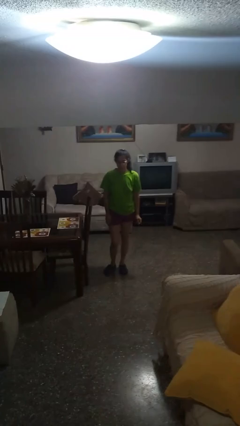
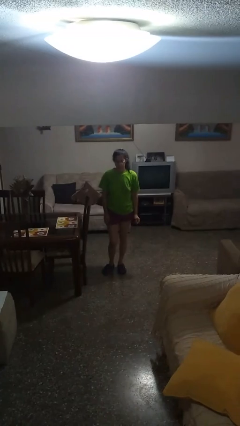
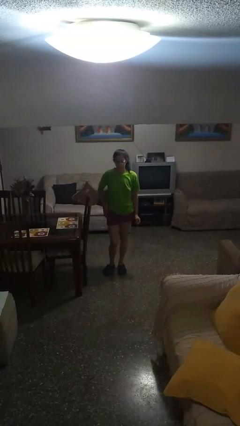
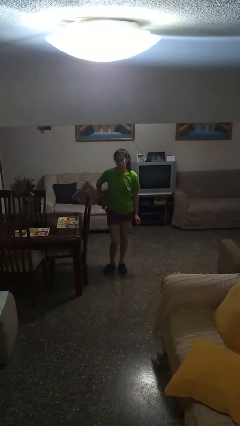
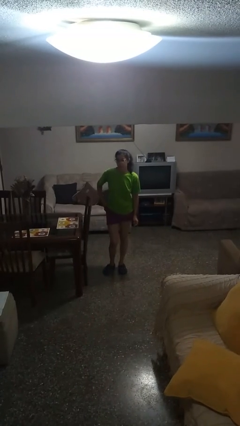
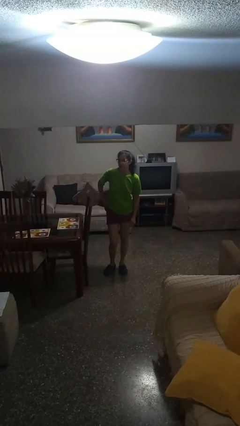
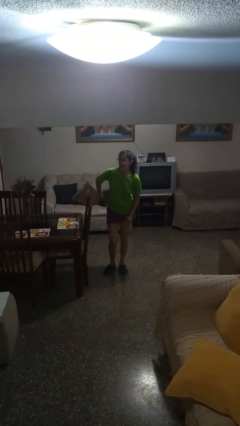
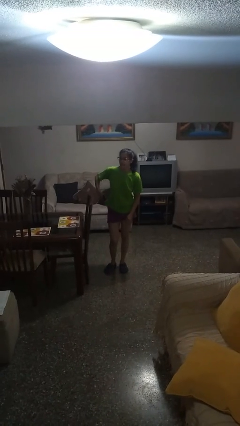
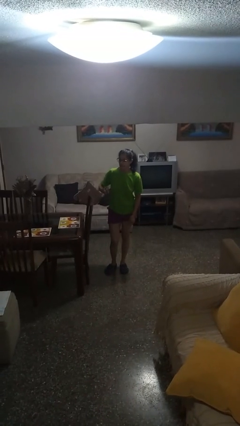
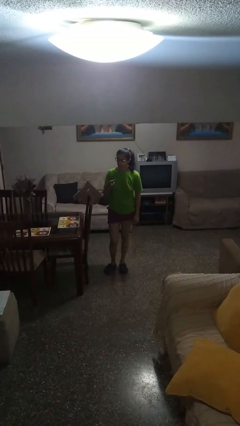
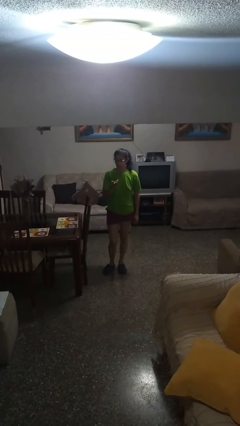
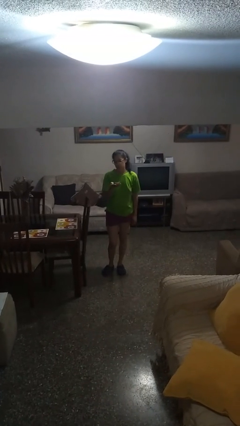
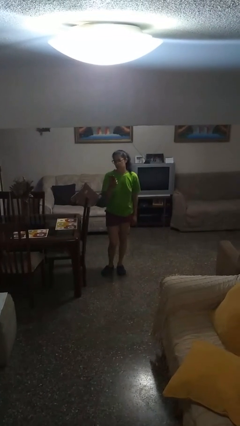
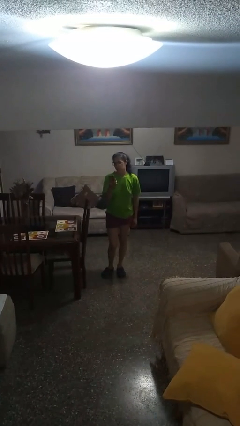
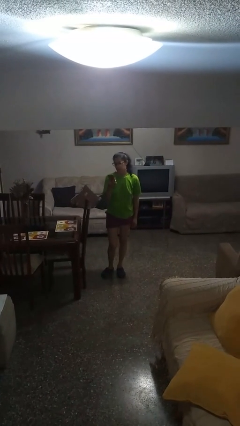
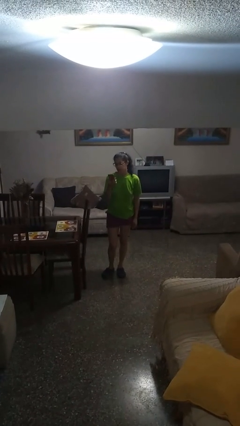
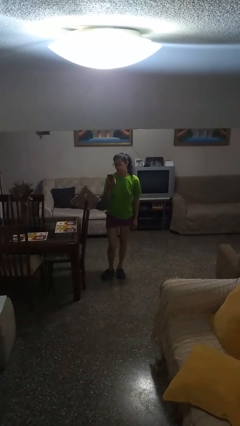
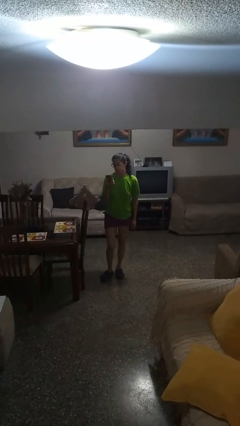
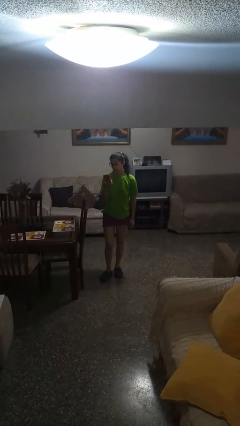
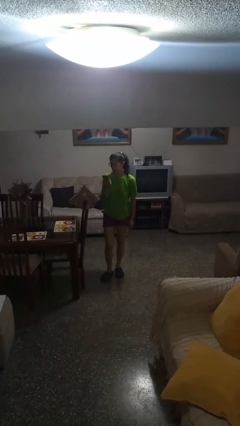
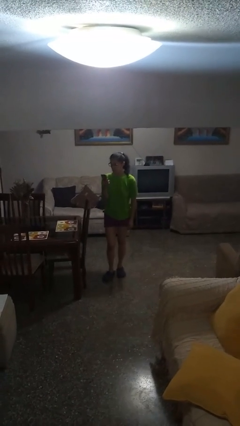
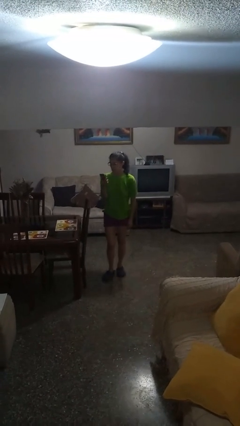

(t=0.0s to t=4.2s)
person takes phone from pocket

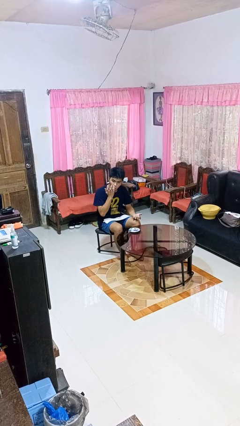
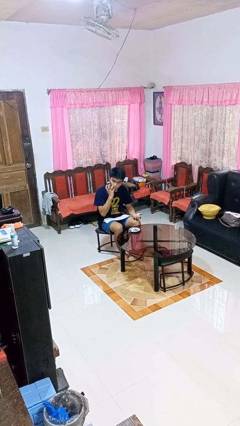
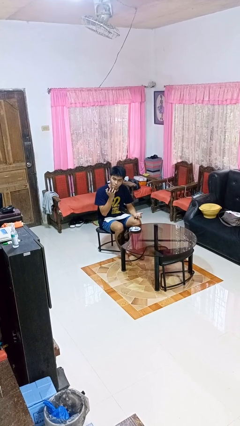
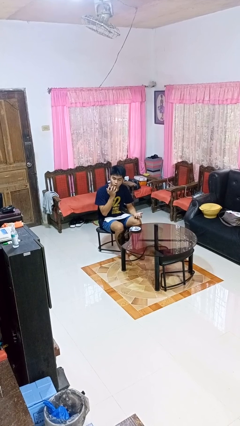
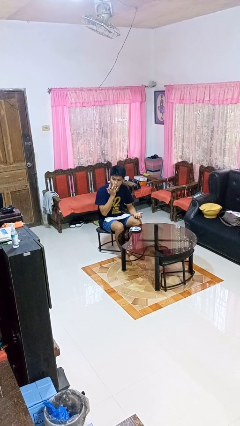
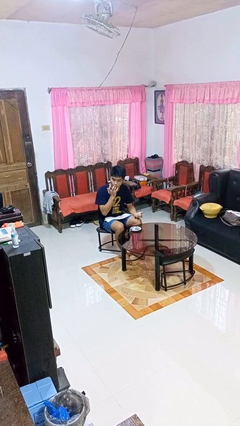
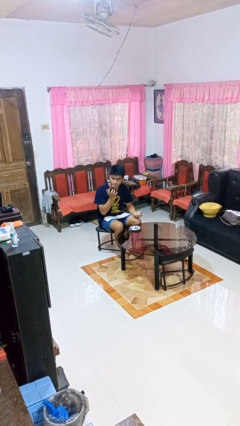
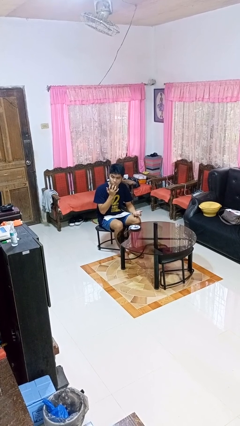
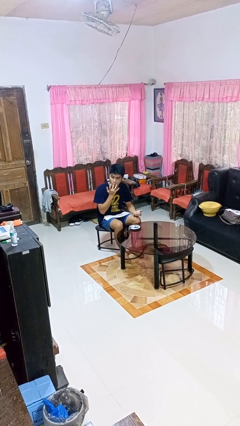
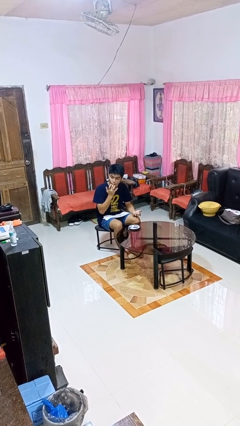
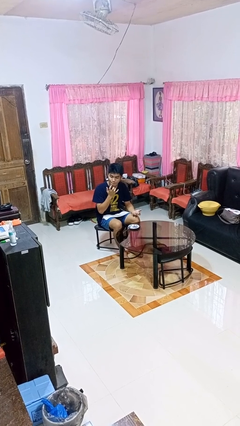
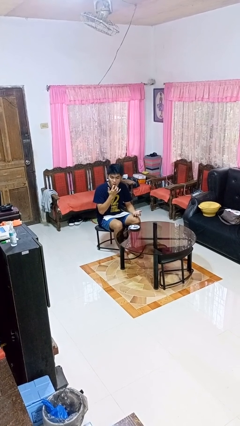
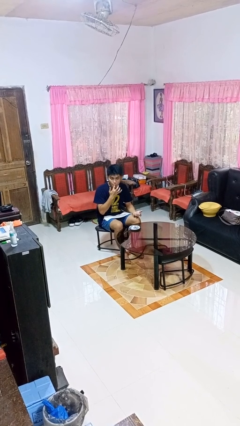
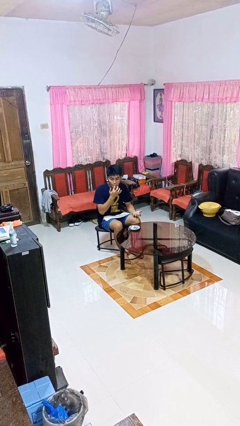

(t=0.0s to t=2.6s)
person licks fingers

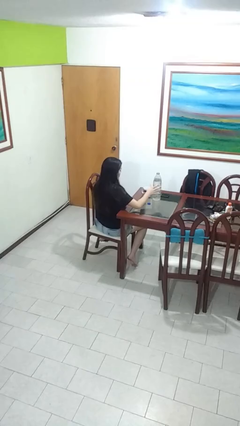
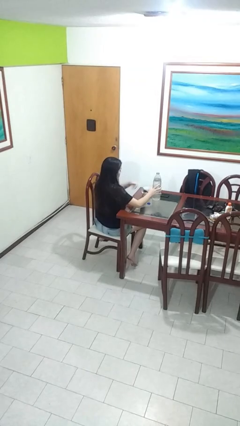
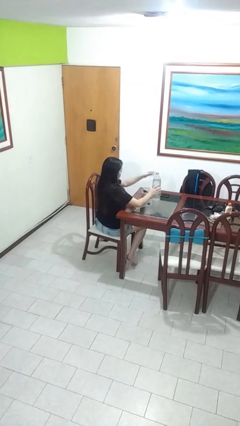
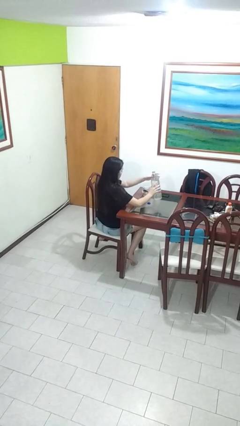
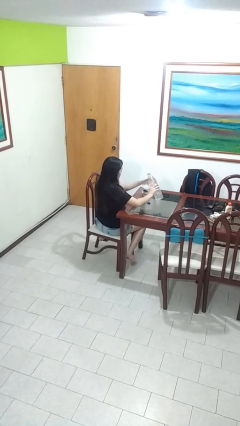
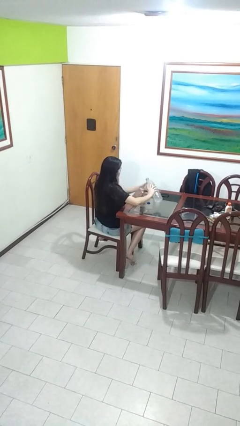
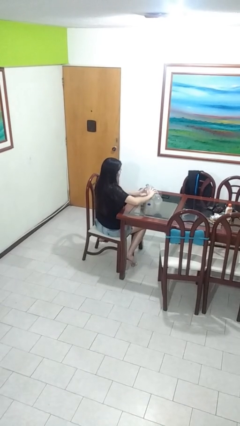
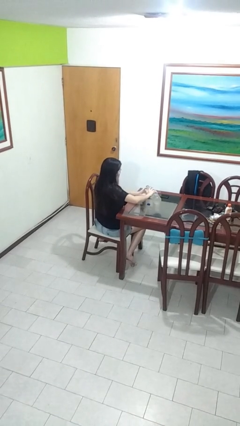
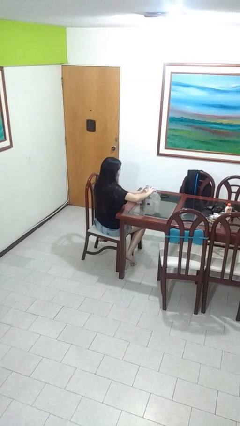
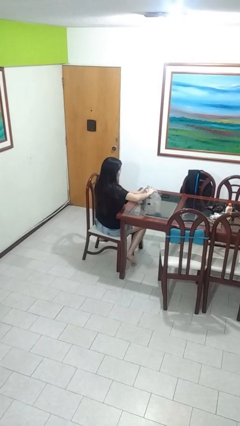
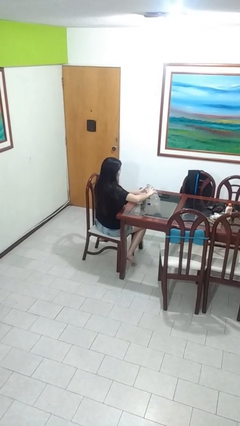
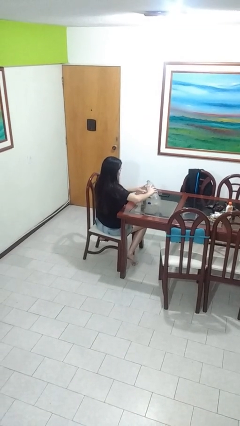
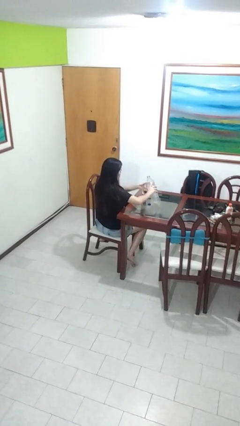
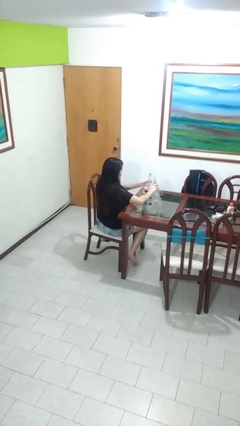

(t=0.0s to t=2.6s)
person pours liquid into cup

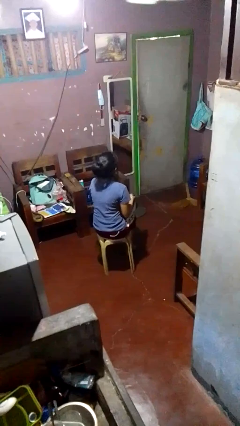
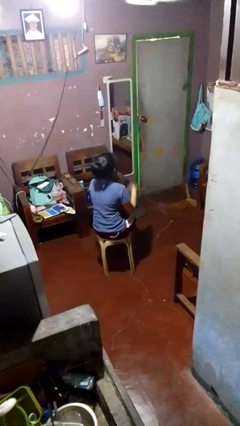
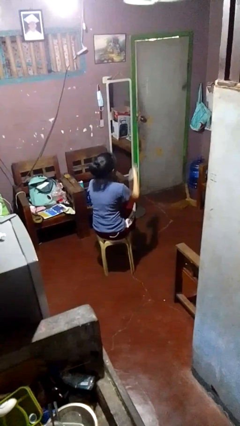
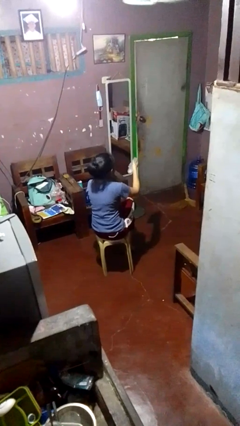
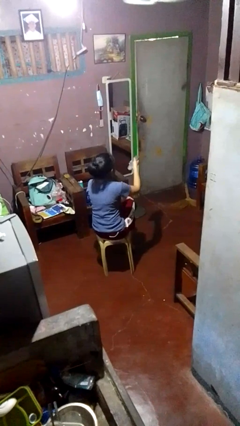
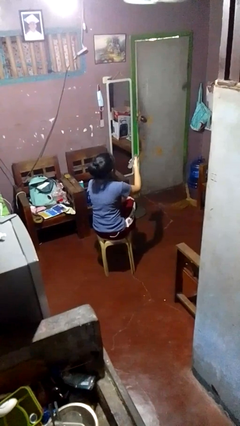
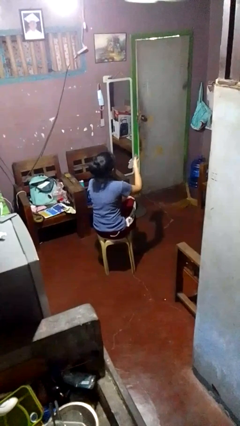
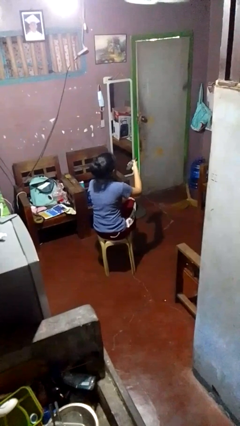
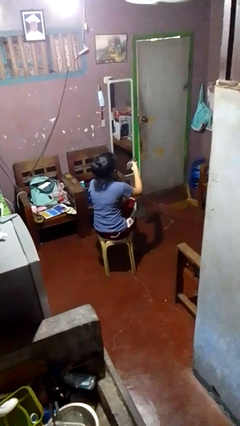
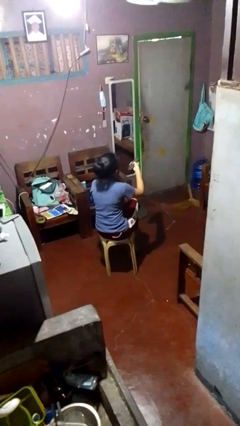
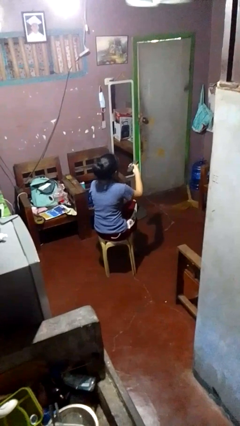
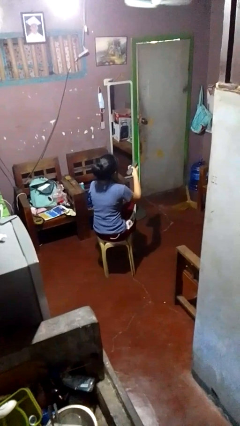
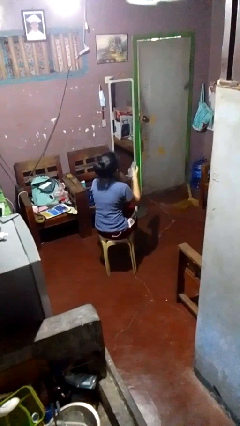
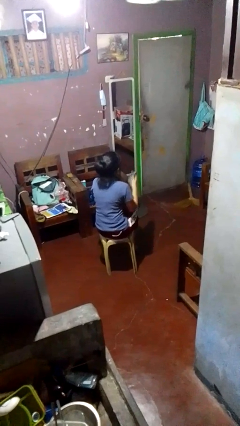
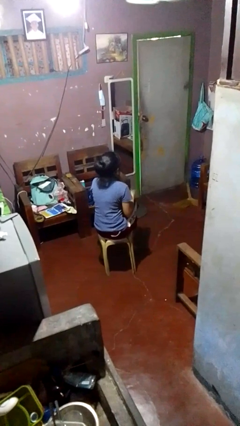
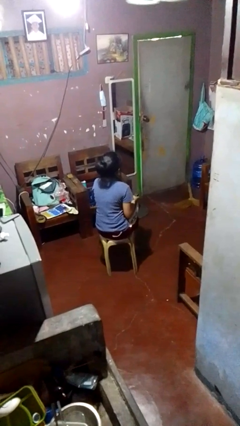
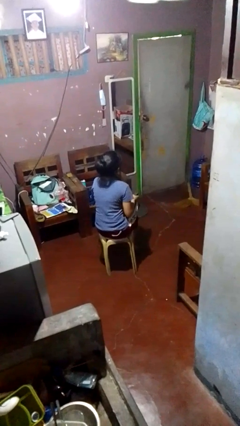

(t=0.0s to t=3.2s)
person uses television remote

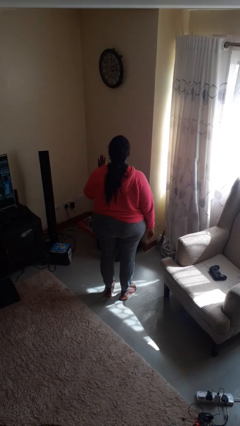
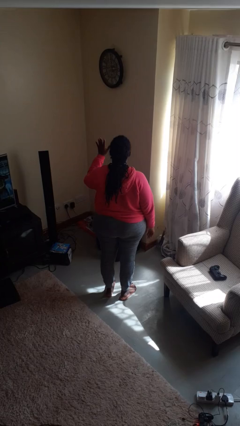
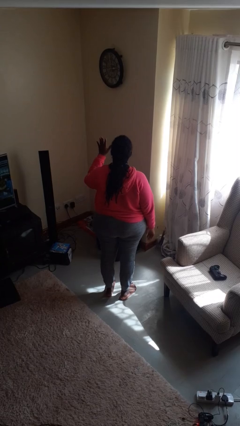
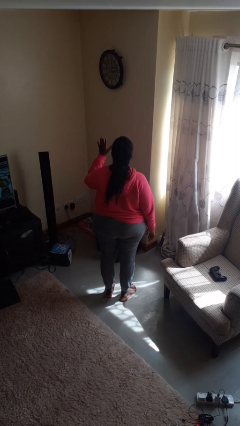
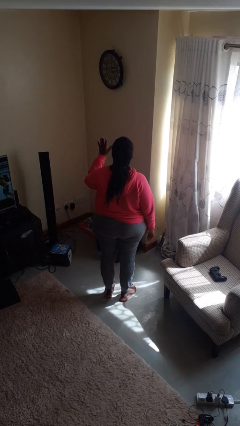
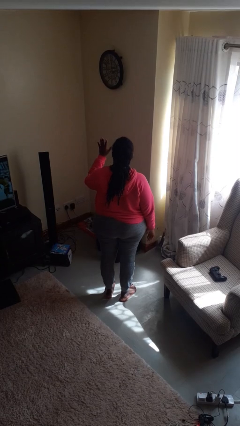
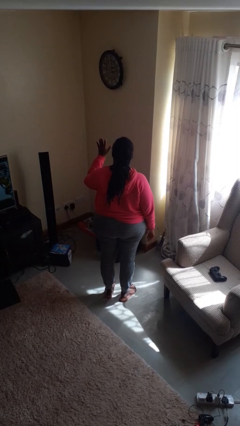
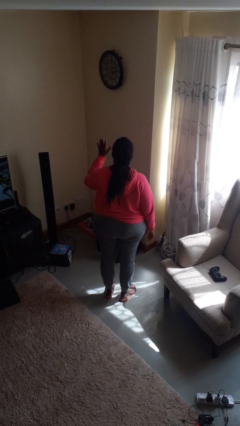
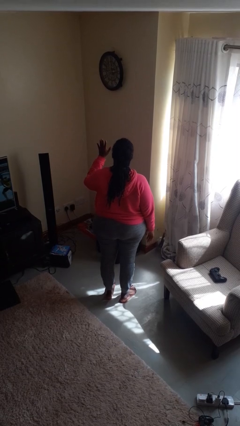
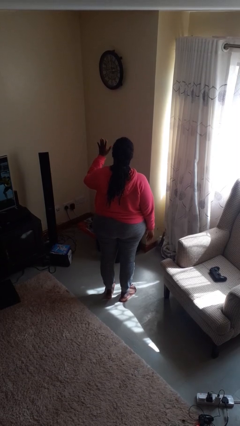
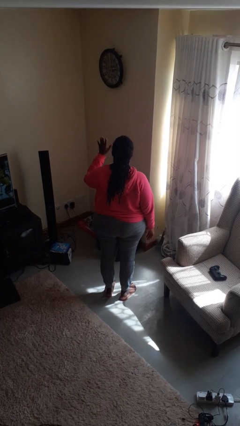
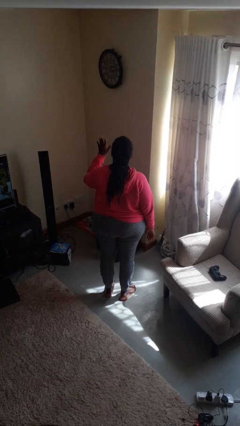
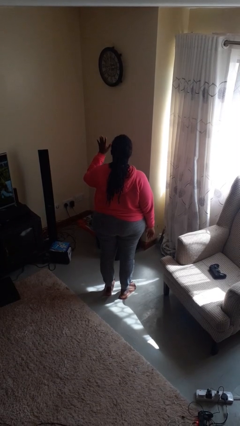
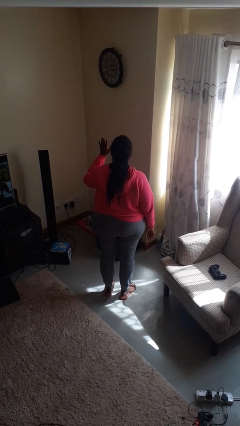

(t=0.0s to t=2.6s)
person gestures number five

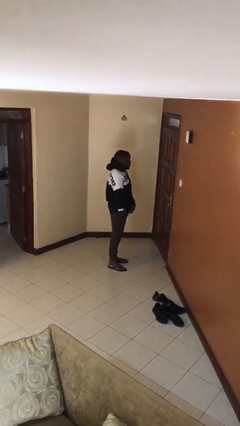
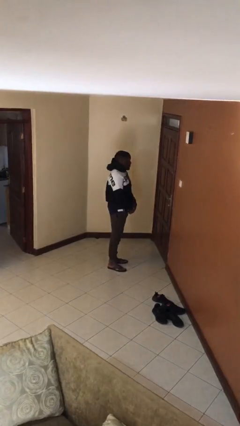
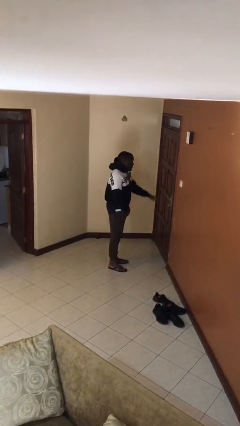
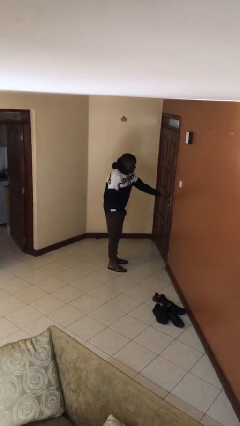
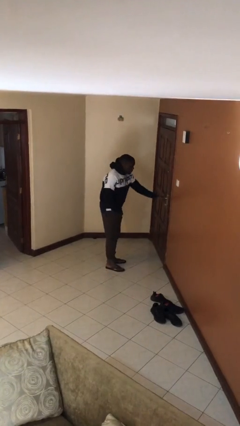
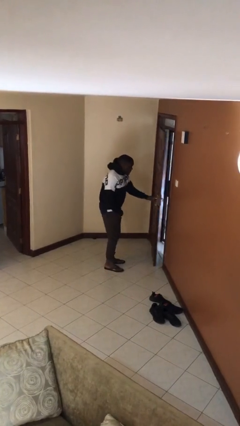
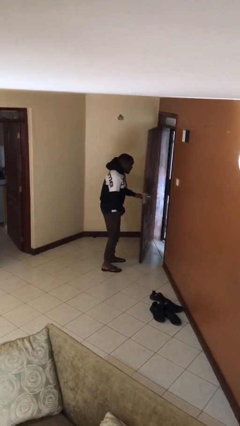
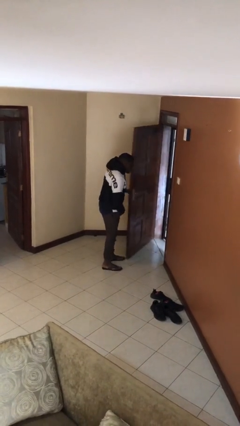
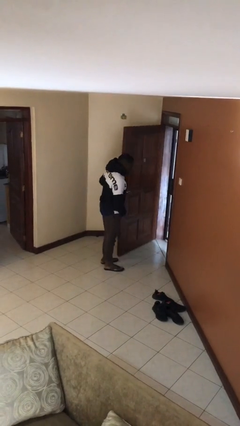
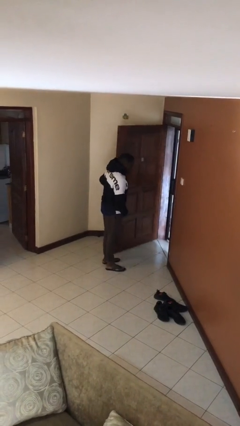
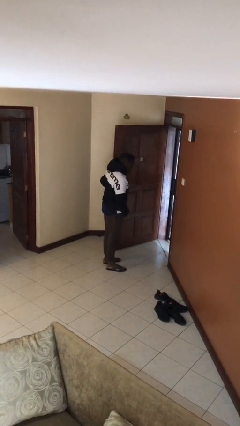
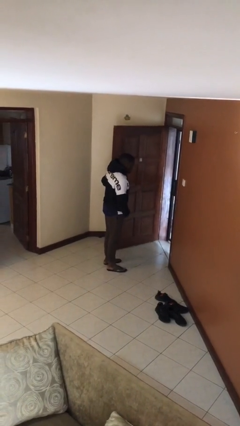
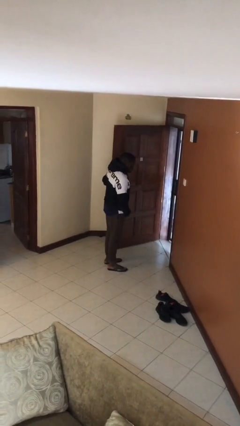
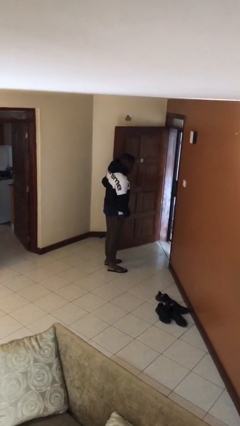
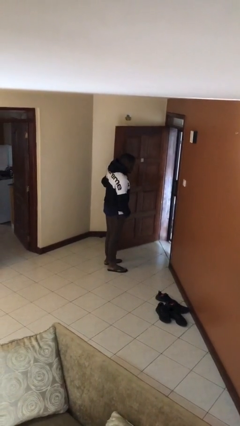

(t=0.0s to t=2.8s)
person opens facility door
